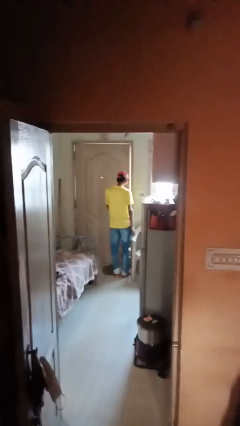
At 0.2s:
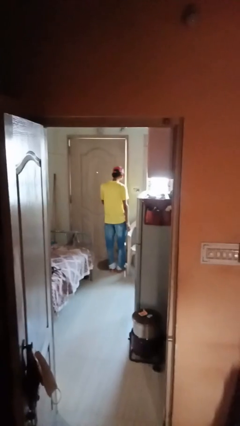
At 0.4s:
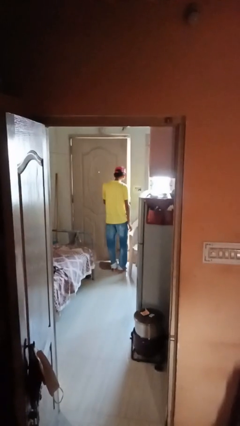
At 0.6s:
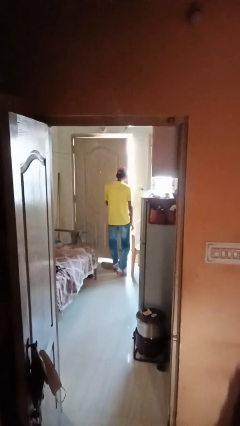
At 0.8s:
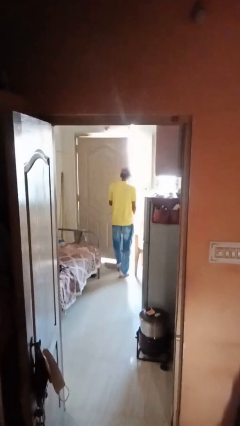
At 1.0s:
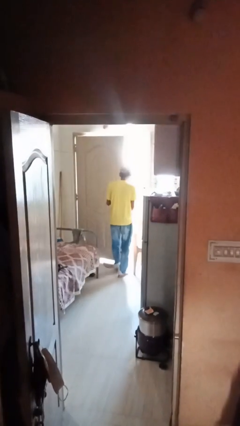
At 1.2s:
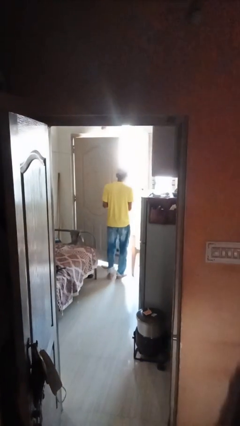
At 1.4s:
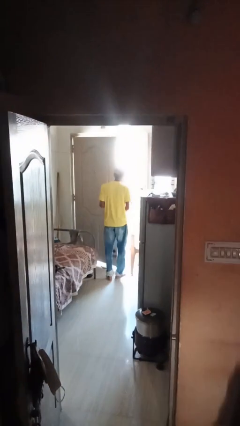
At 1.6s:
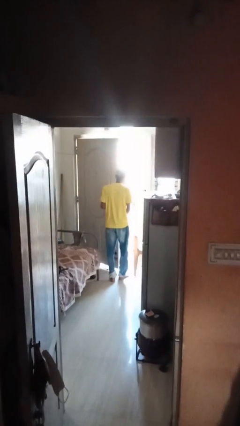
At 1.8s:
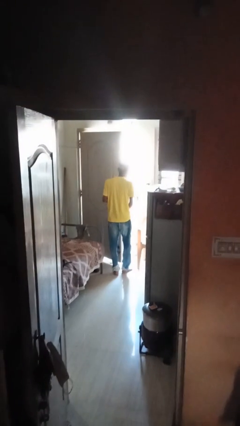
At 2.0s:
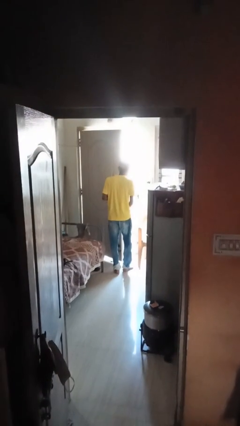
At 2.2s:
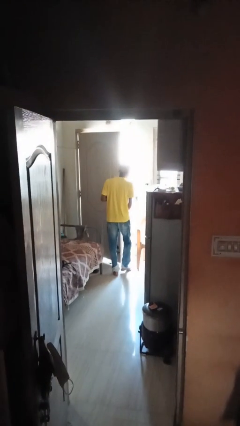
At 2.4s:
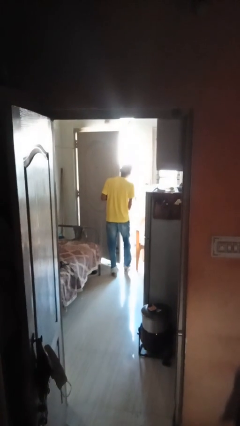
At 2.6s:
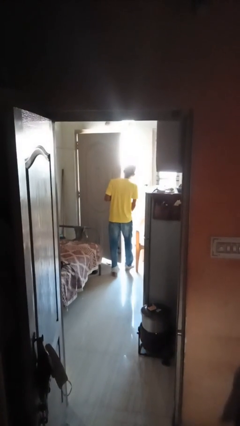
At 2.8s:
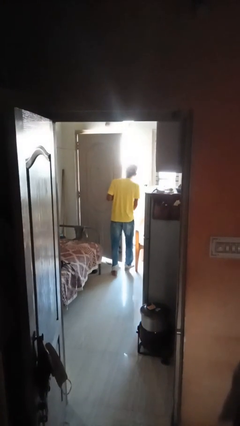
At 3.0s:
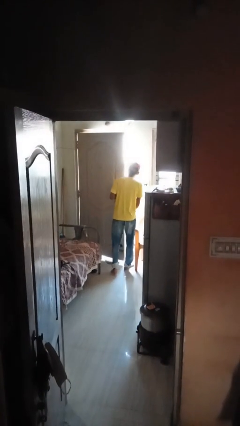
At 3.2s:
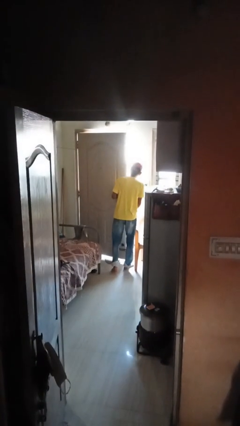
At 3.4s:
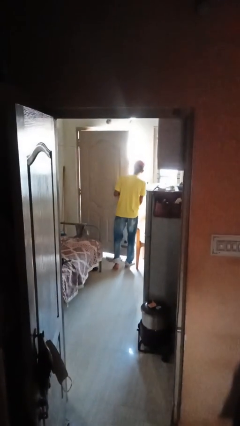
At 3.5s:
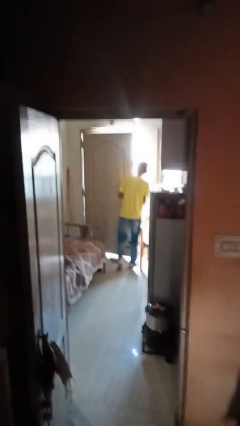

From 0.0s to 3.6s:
person opens facility door

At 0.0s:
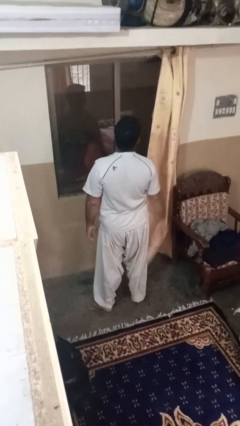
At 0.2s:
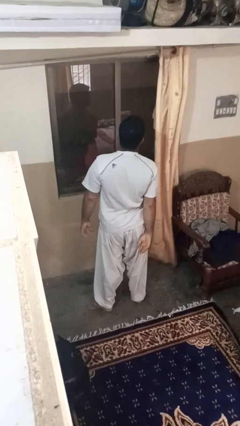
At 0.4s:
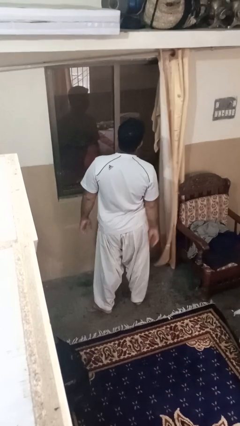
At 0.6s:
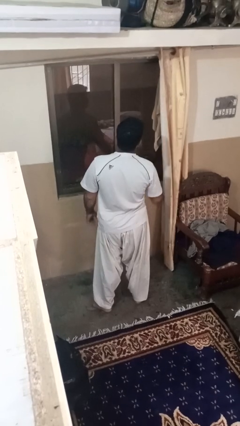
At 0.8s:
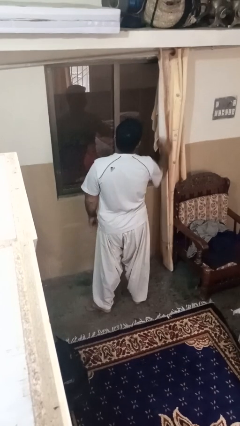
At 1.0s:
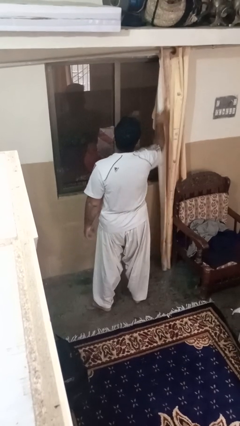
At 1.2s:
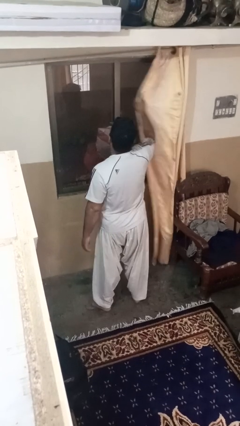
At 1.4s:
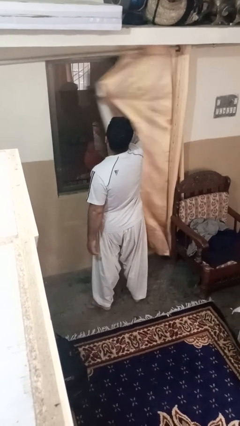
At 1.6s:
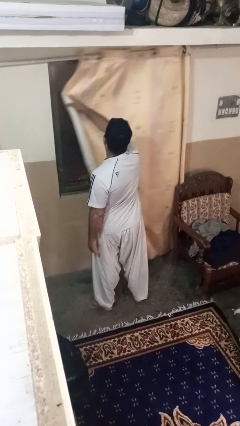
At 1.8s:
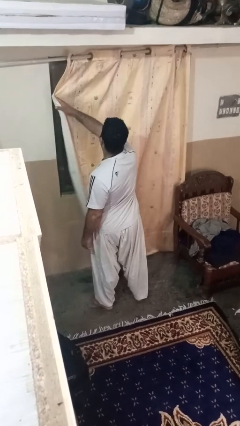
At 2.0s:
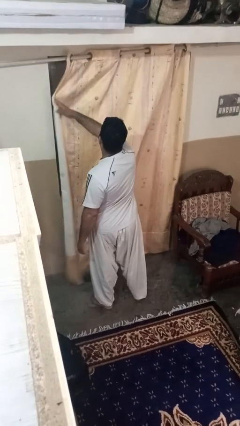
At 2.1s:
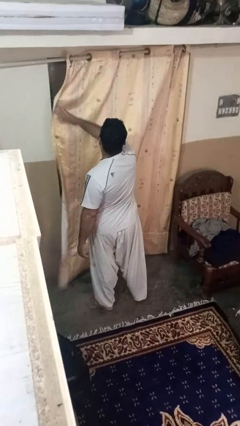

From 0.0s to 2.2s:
person closes curtains

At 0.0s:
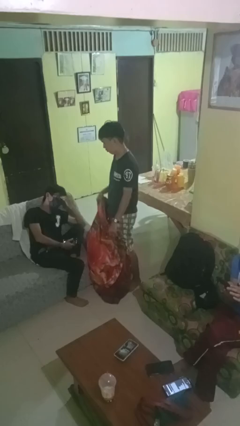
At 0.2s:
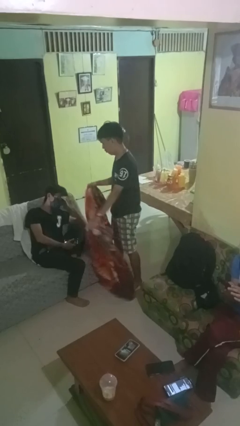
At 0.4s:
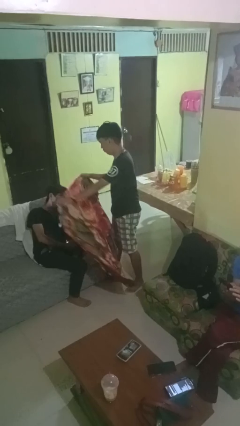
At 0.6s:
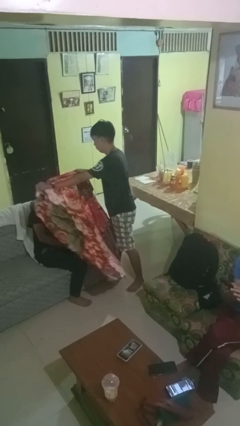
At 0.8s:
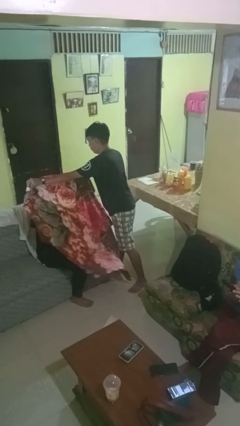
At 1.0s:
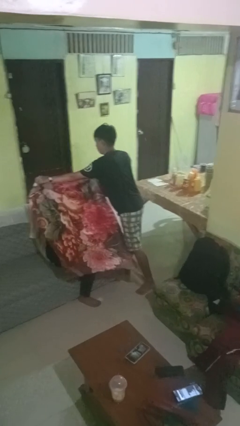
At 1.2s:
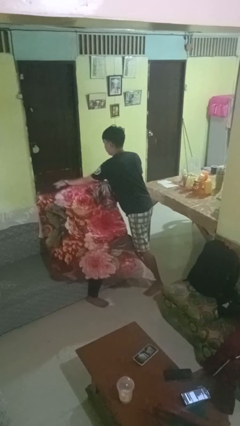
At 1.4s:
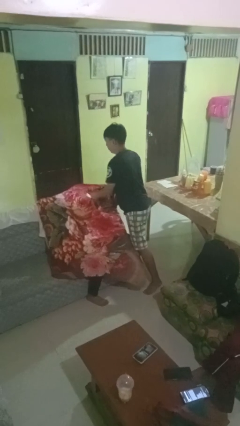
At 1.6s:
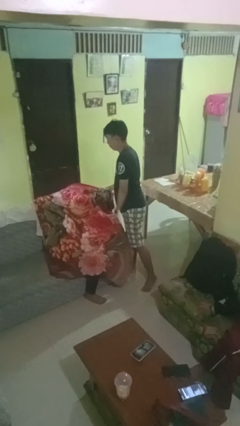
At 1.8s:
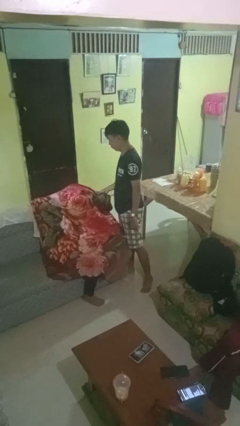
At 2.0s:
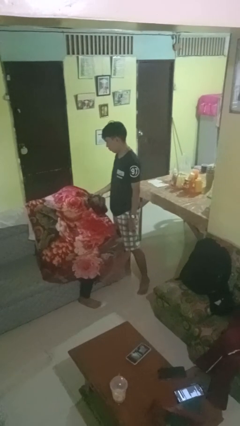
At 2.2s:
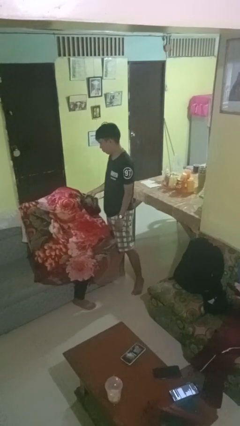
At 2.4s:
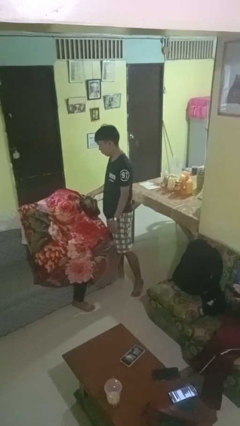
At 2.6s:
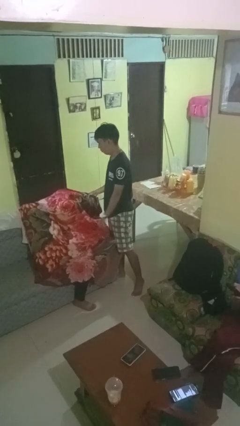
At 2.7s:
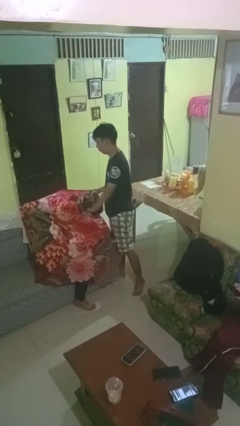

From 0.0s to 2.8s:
person covers friend with blanket

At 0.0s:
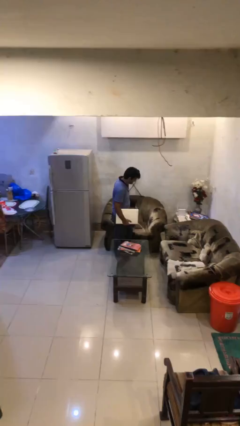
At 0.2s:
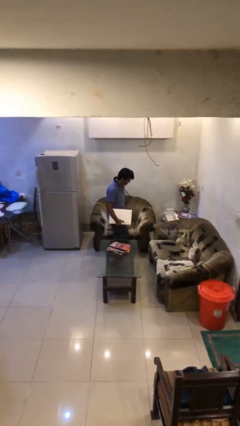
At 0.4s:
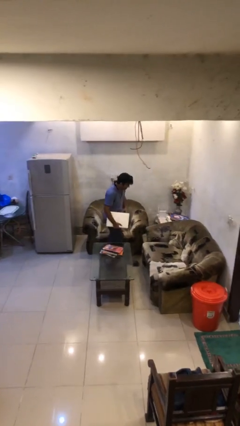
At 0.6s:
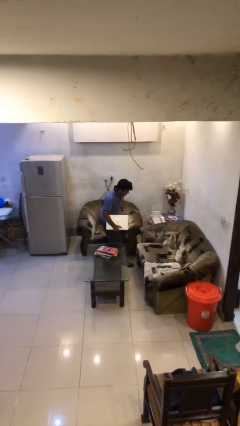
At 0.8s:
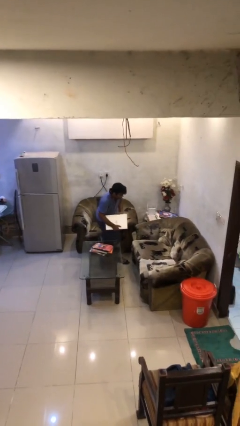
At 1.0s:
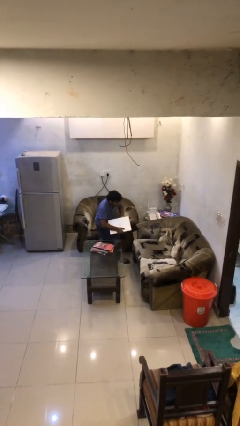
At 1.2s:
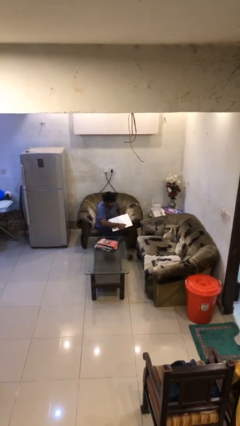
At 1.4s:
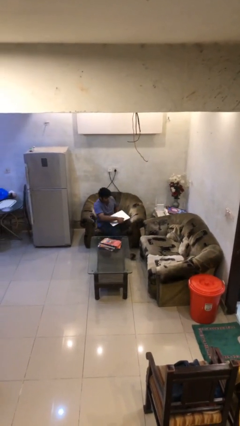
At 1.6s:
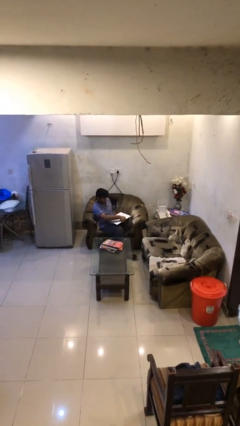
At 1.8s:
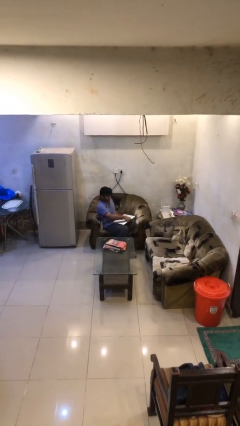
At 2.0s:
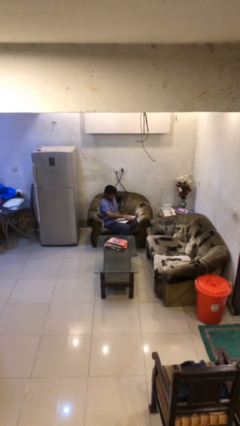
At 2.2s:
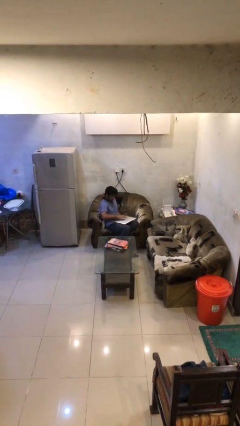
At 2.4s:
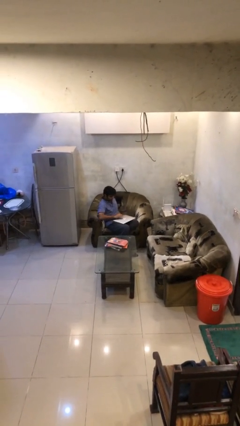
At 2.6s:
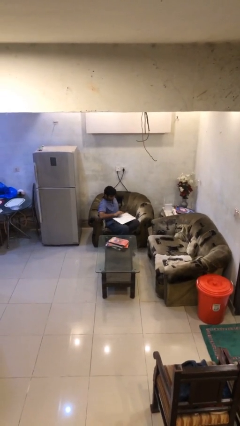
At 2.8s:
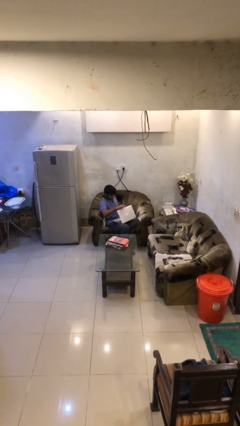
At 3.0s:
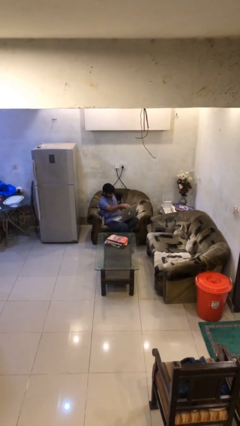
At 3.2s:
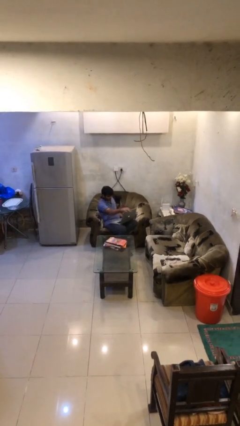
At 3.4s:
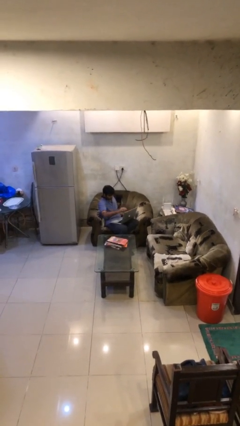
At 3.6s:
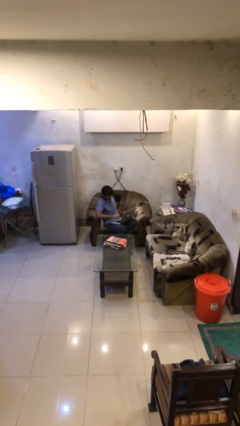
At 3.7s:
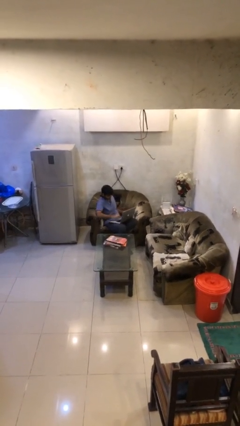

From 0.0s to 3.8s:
person sits down

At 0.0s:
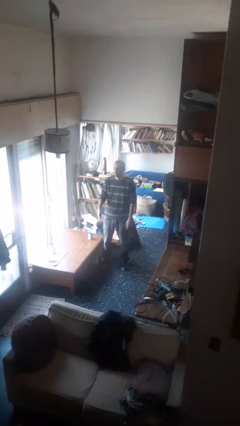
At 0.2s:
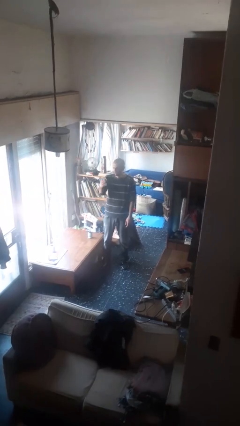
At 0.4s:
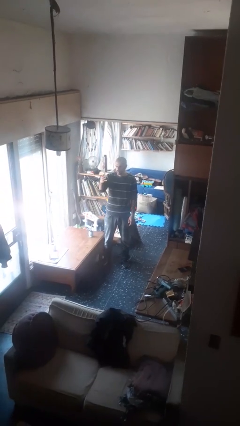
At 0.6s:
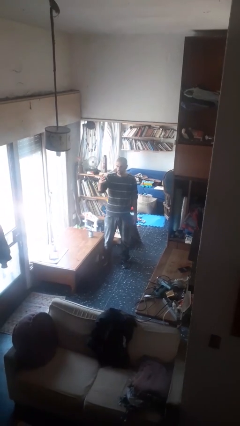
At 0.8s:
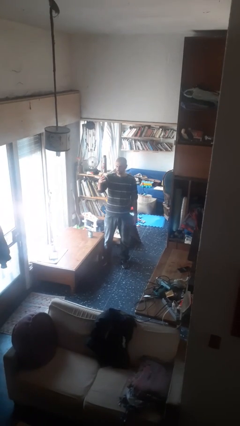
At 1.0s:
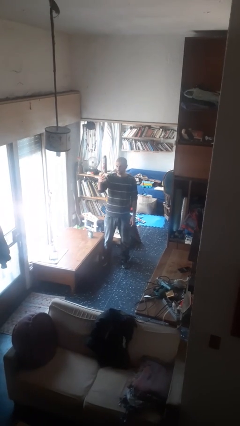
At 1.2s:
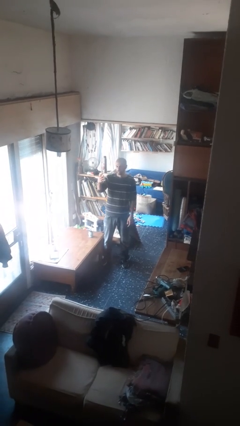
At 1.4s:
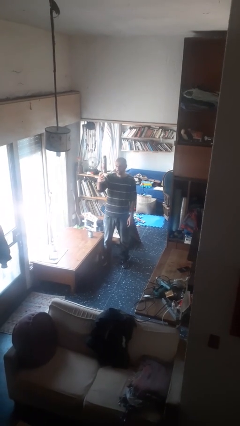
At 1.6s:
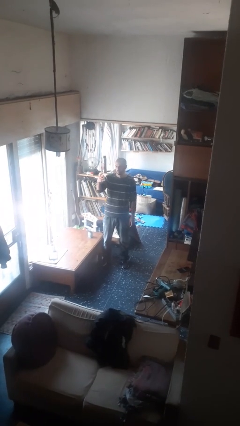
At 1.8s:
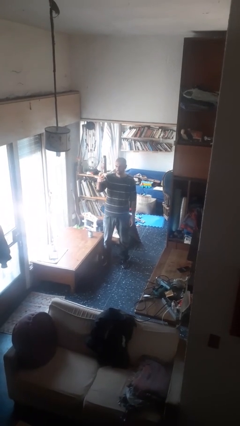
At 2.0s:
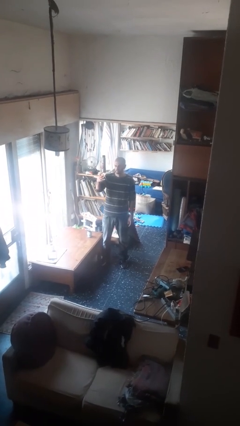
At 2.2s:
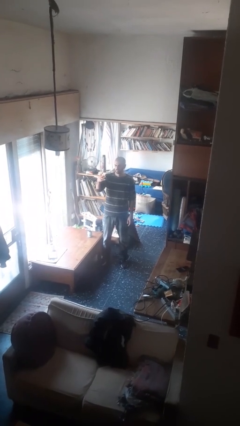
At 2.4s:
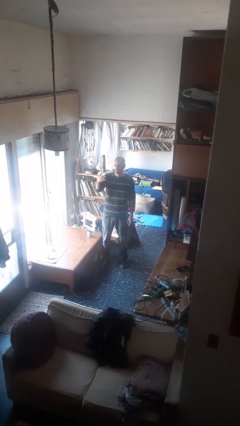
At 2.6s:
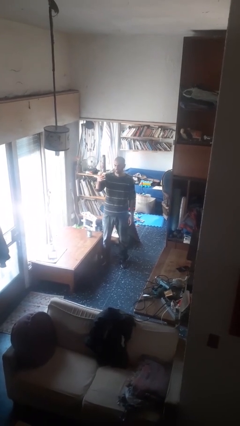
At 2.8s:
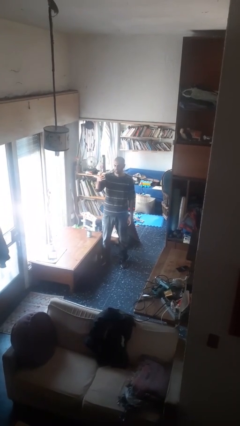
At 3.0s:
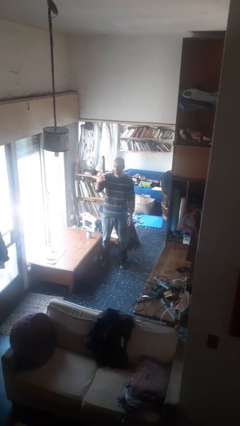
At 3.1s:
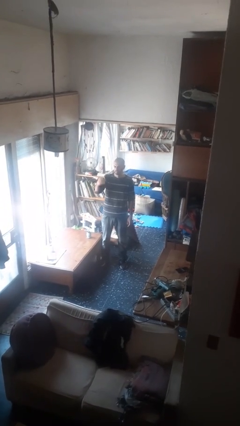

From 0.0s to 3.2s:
person gestures number four

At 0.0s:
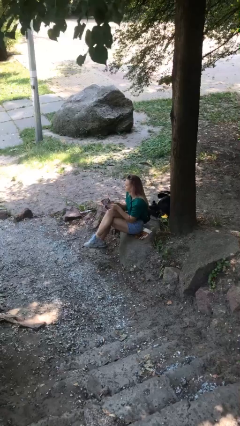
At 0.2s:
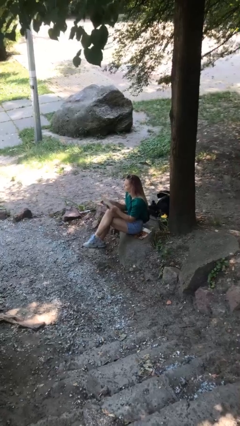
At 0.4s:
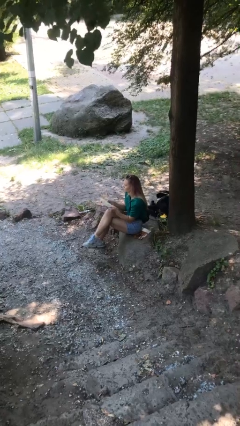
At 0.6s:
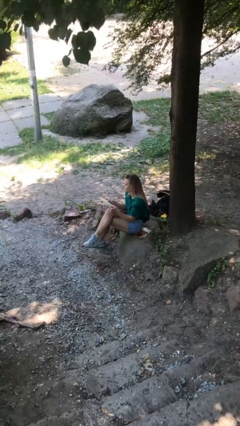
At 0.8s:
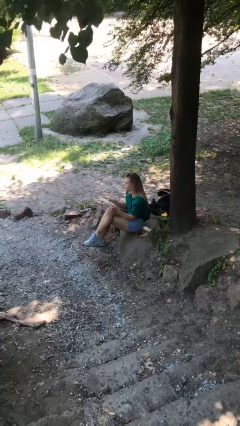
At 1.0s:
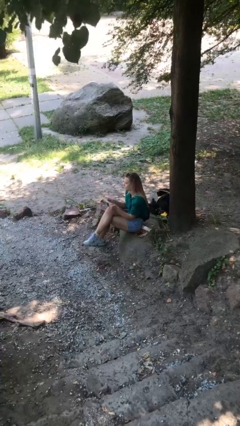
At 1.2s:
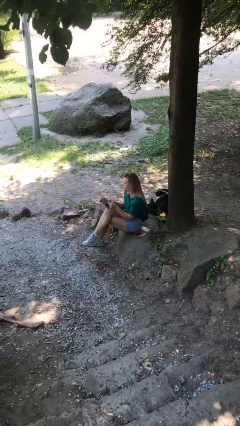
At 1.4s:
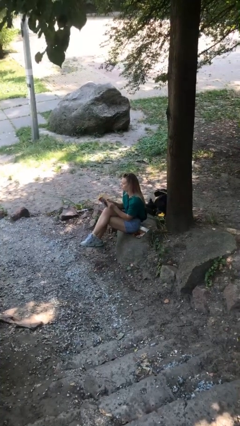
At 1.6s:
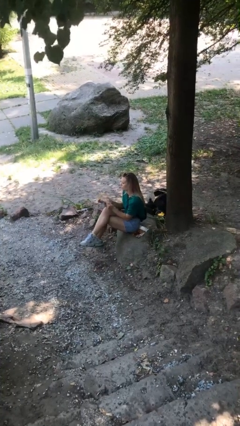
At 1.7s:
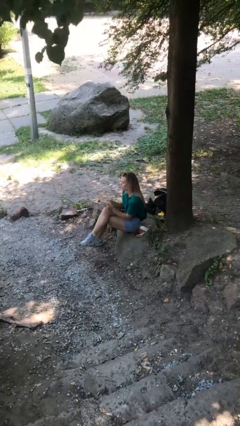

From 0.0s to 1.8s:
person reads book

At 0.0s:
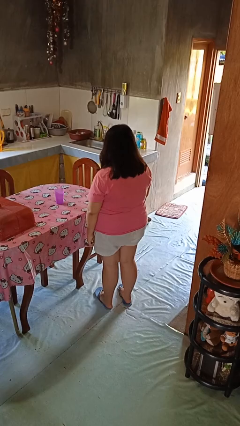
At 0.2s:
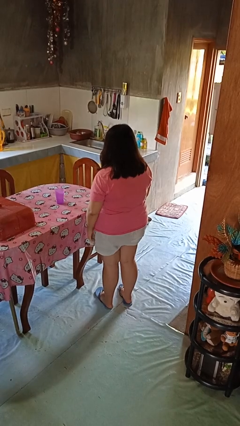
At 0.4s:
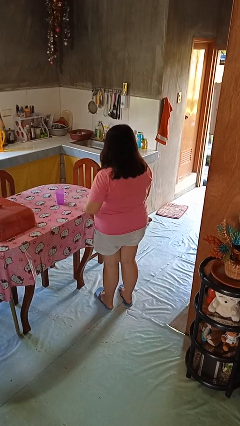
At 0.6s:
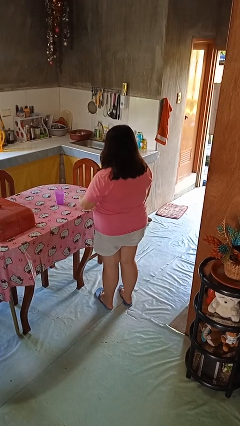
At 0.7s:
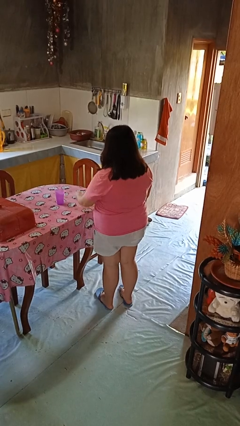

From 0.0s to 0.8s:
person knocks over glass
